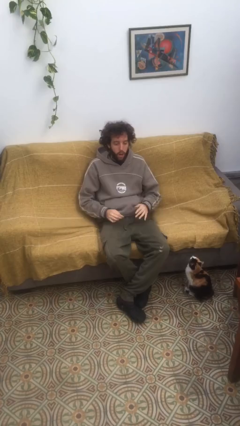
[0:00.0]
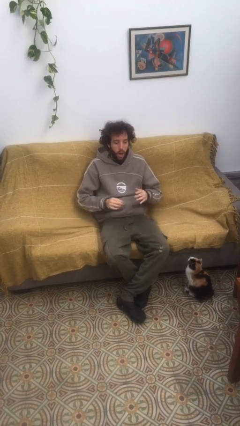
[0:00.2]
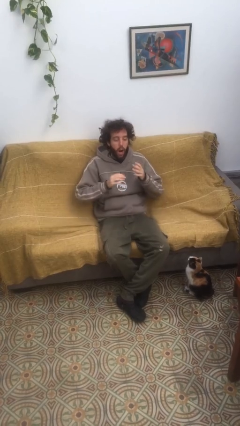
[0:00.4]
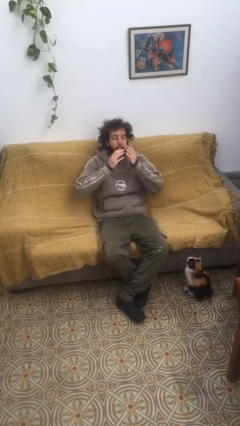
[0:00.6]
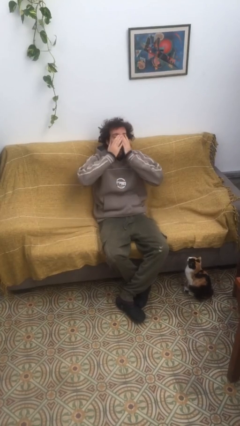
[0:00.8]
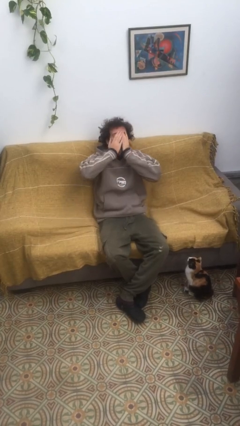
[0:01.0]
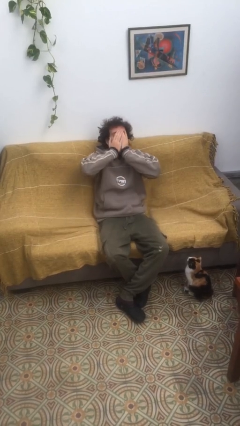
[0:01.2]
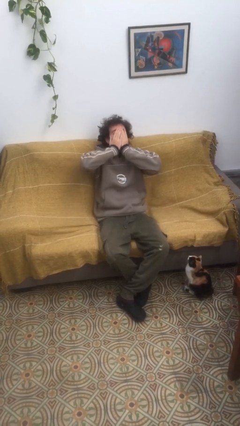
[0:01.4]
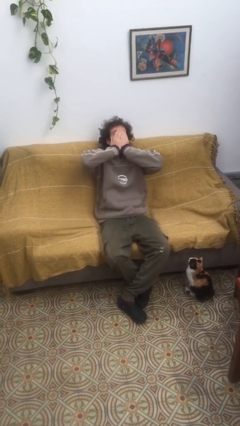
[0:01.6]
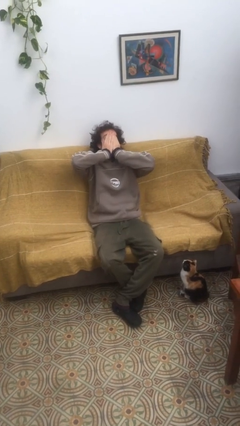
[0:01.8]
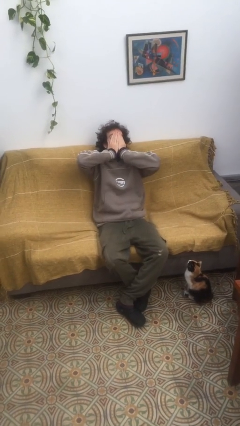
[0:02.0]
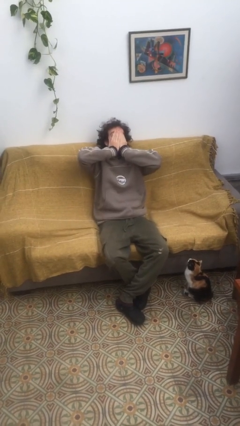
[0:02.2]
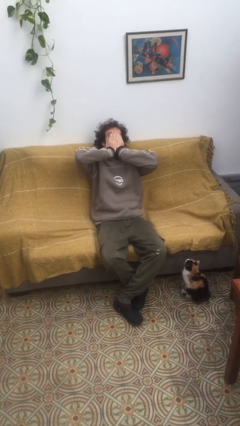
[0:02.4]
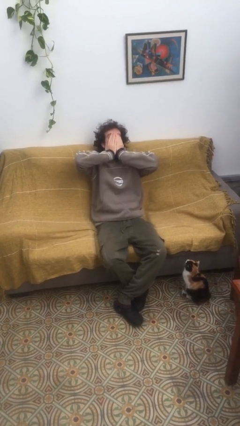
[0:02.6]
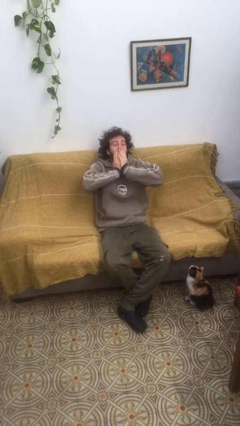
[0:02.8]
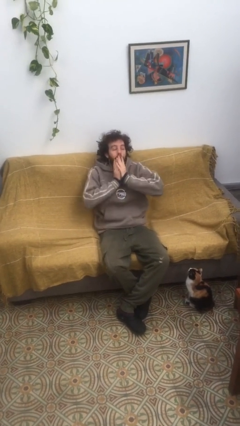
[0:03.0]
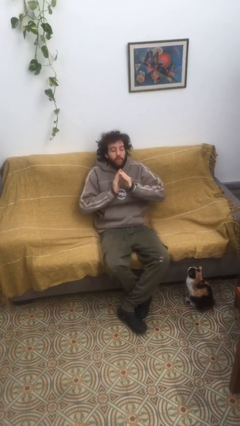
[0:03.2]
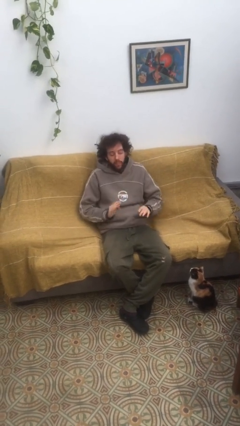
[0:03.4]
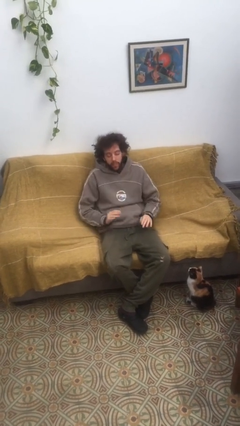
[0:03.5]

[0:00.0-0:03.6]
person yawns

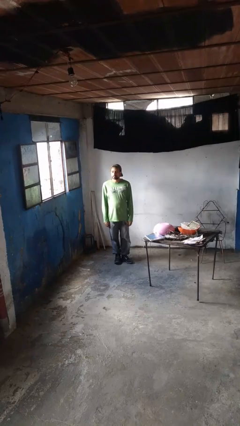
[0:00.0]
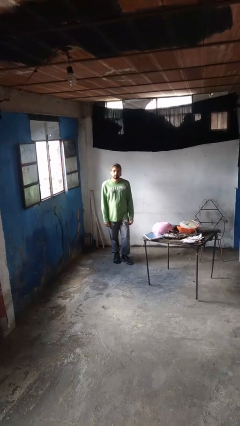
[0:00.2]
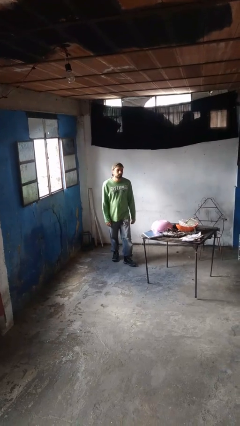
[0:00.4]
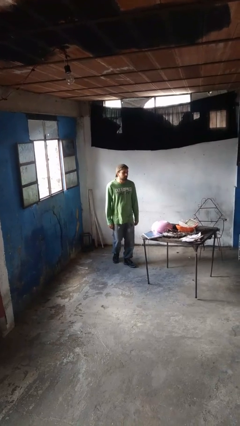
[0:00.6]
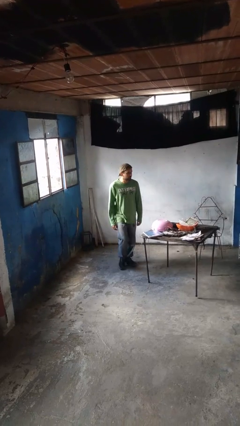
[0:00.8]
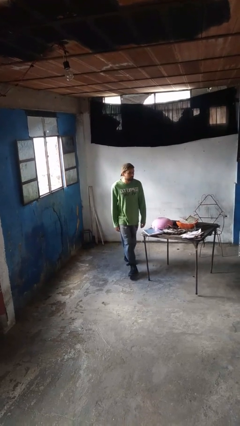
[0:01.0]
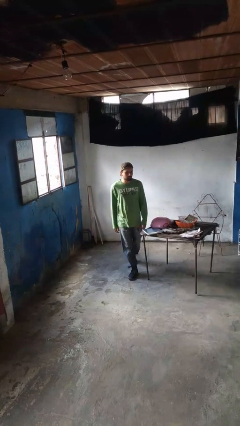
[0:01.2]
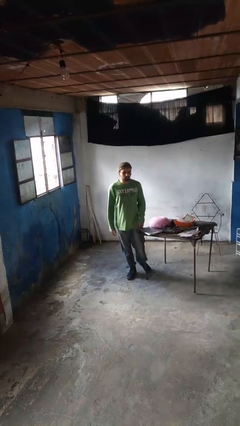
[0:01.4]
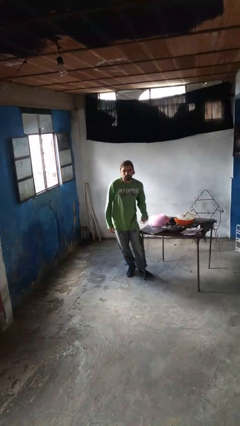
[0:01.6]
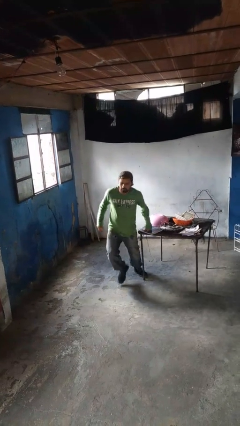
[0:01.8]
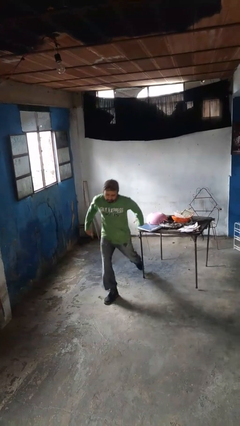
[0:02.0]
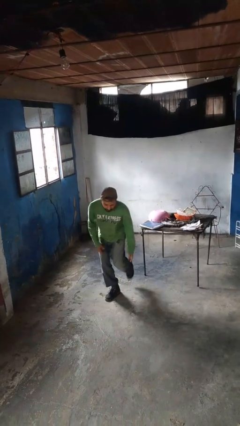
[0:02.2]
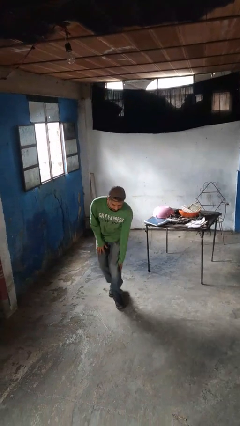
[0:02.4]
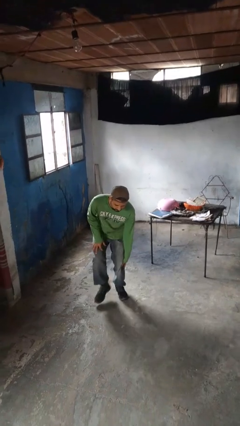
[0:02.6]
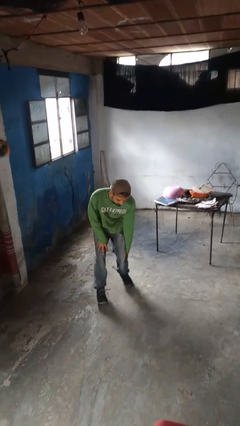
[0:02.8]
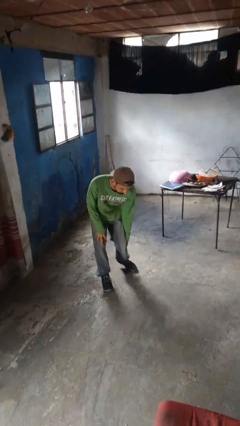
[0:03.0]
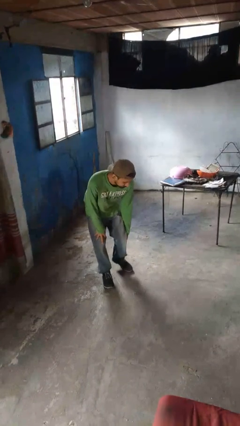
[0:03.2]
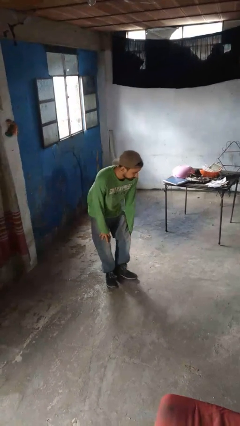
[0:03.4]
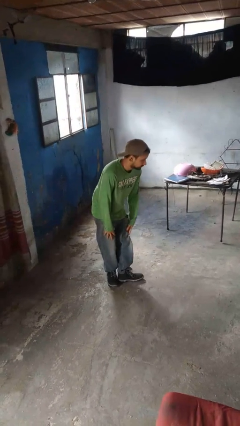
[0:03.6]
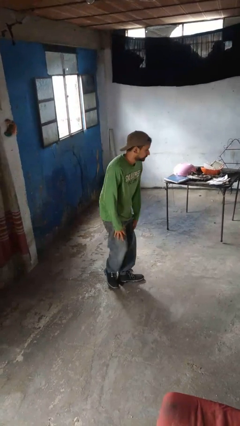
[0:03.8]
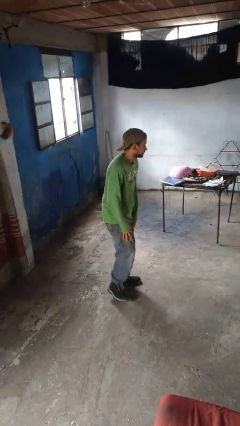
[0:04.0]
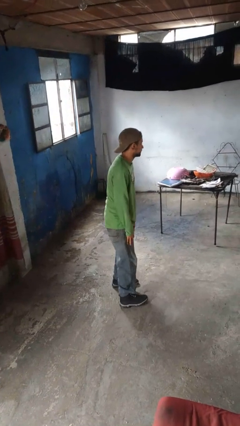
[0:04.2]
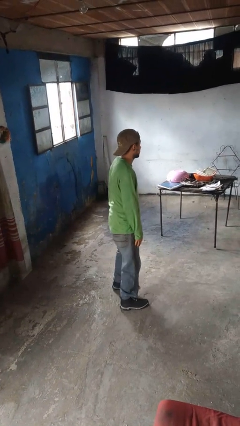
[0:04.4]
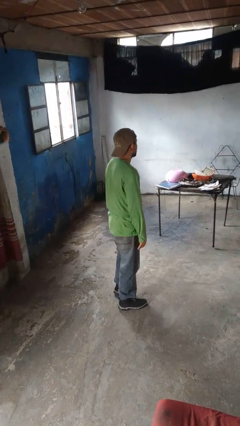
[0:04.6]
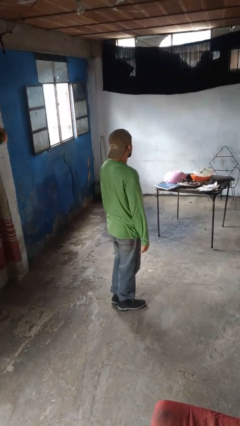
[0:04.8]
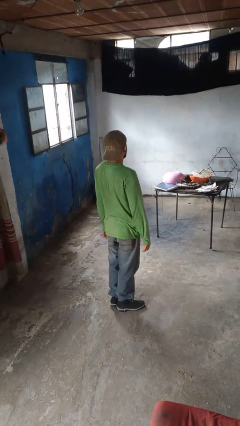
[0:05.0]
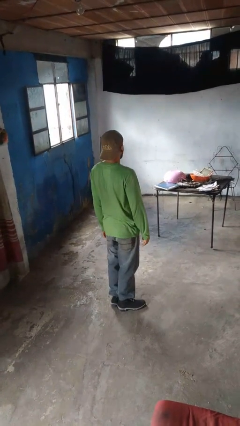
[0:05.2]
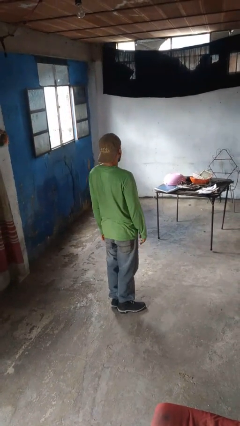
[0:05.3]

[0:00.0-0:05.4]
person bumps into table

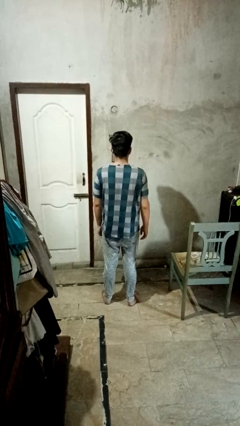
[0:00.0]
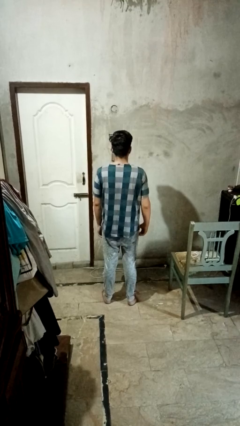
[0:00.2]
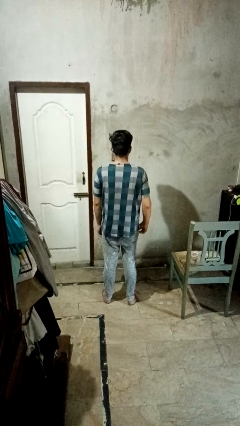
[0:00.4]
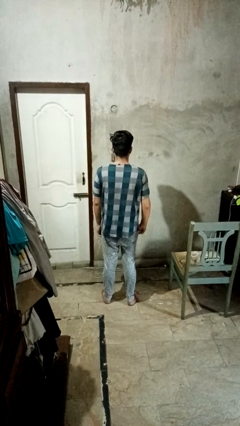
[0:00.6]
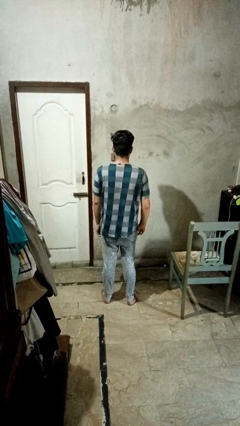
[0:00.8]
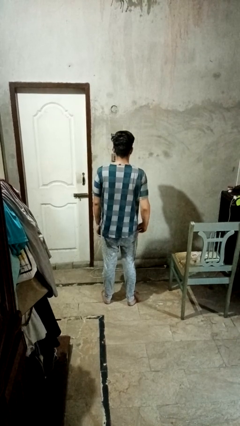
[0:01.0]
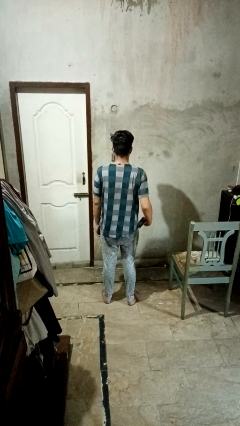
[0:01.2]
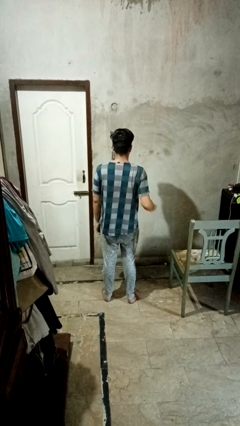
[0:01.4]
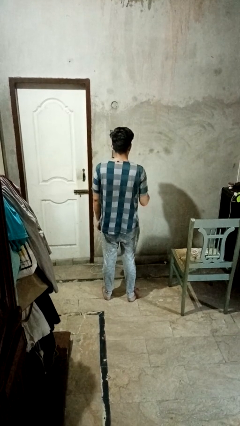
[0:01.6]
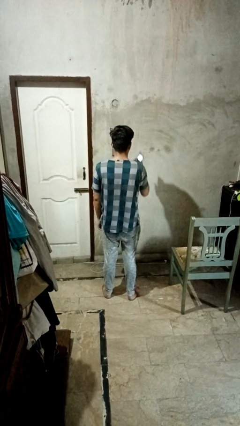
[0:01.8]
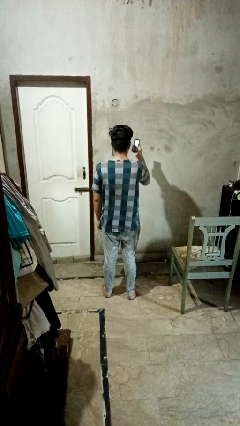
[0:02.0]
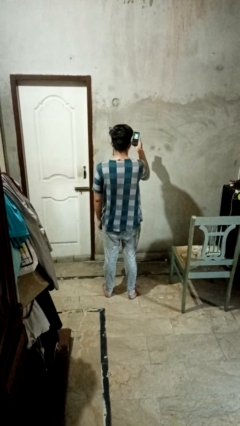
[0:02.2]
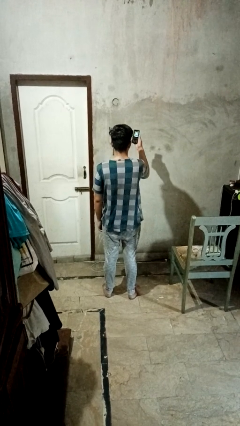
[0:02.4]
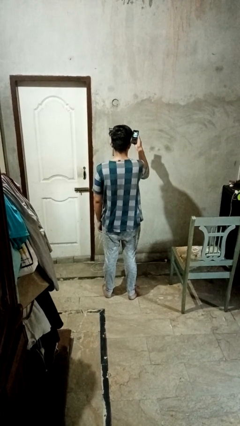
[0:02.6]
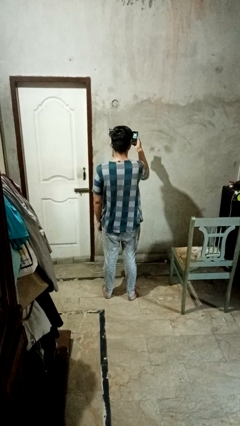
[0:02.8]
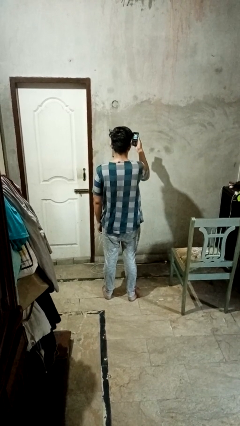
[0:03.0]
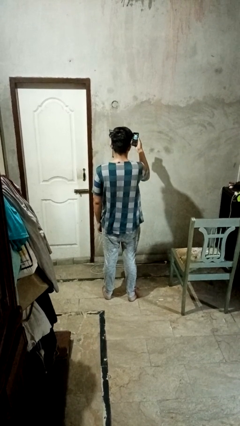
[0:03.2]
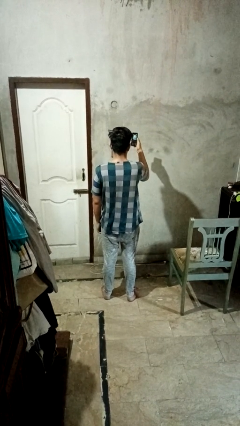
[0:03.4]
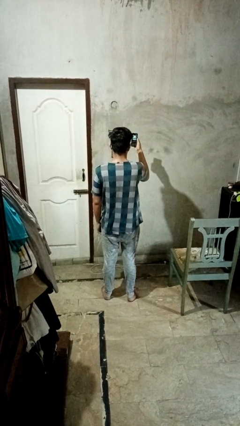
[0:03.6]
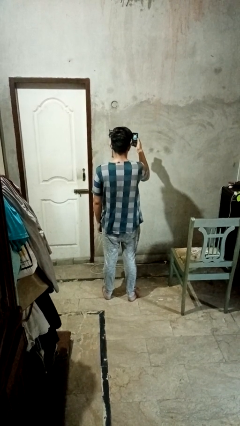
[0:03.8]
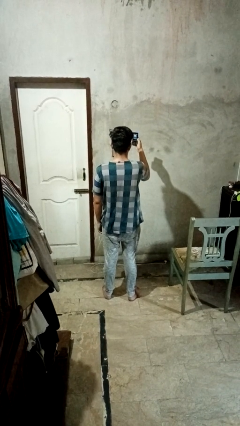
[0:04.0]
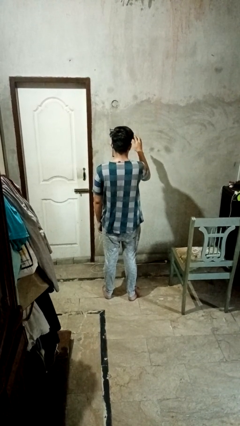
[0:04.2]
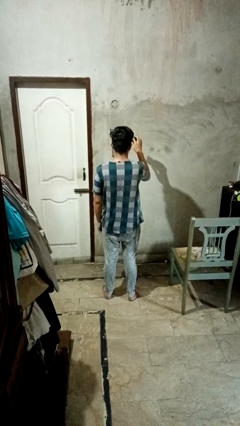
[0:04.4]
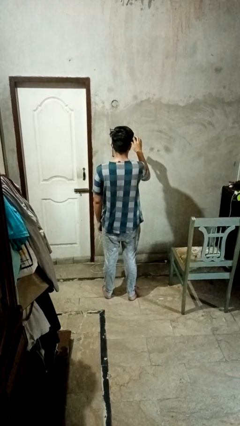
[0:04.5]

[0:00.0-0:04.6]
person takes phone from pocket

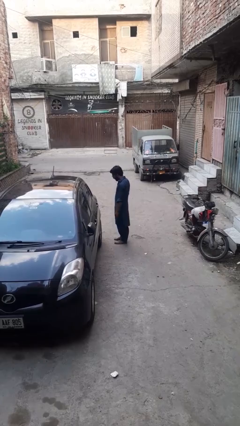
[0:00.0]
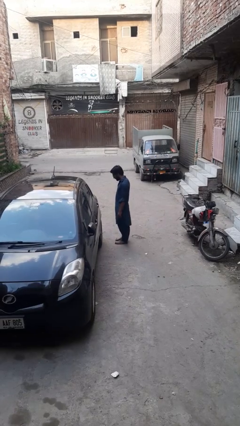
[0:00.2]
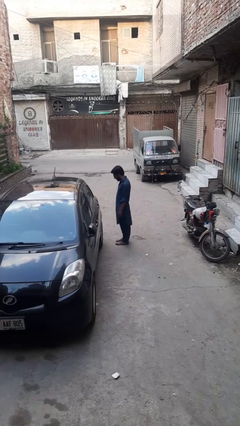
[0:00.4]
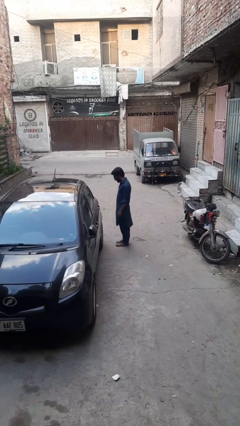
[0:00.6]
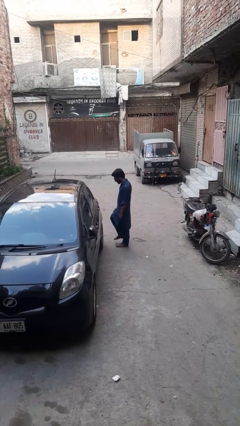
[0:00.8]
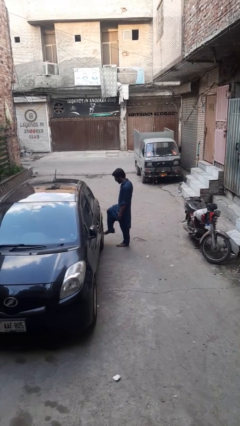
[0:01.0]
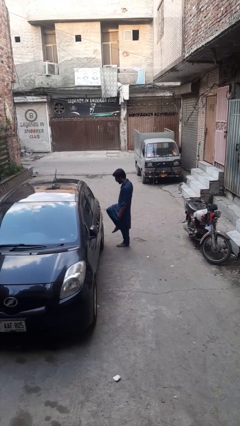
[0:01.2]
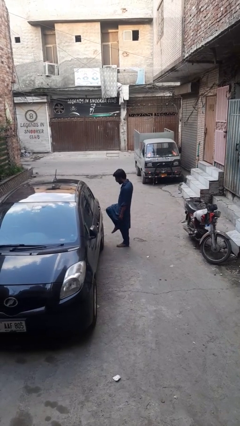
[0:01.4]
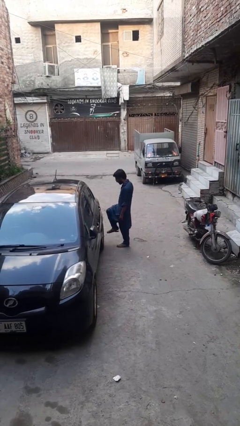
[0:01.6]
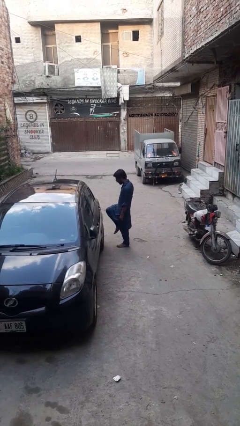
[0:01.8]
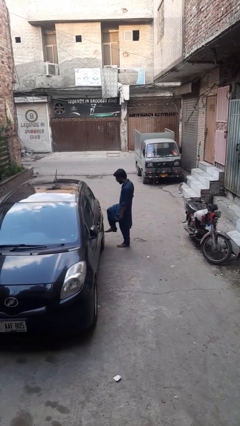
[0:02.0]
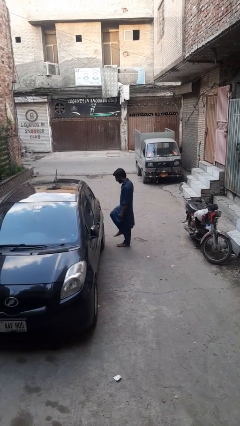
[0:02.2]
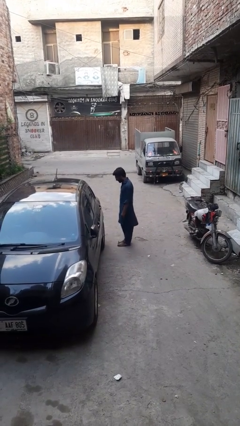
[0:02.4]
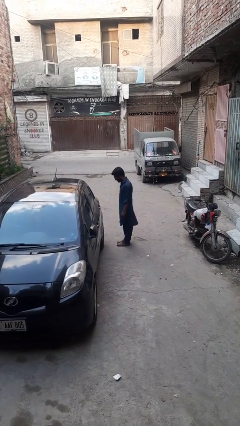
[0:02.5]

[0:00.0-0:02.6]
person kicks car tires

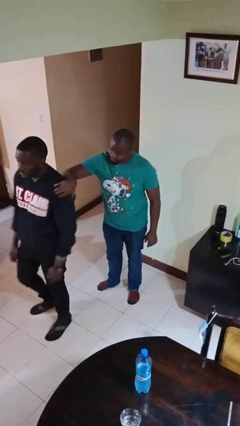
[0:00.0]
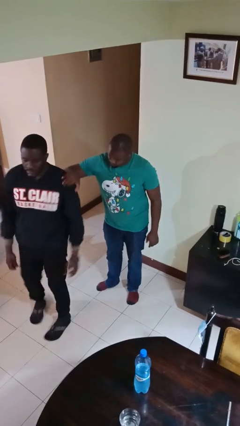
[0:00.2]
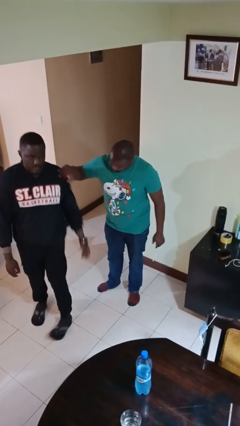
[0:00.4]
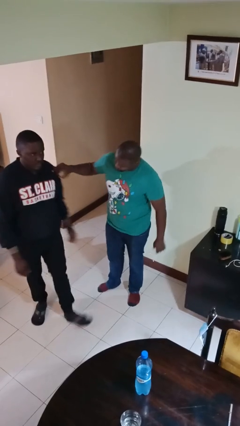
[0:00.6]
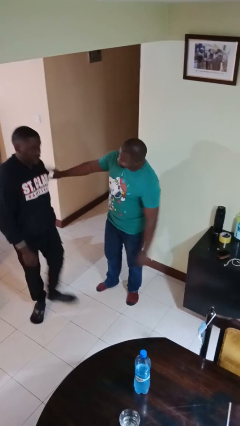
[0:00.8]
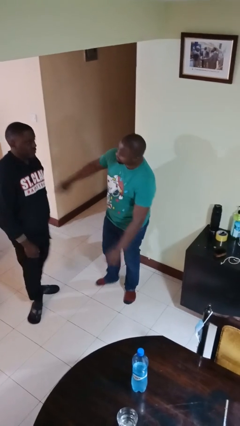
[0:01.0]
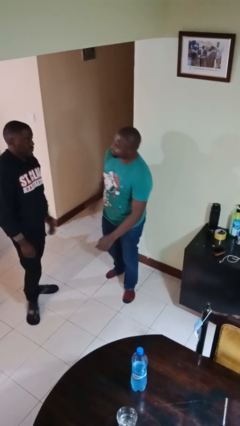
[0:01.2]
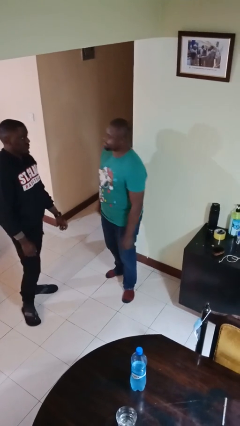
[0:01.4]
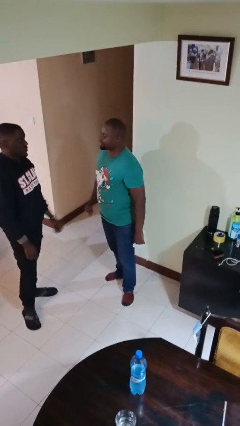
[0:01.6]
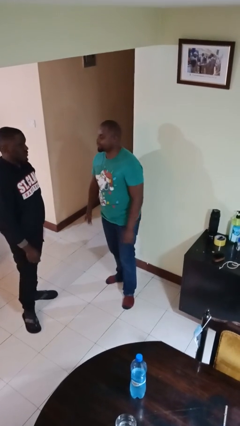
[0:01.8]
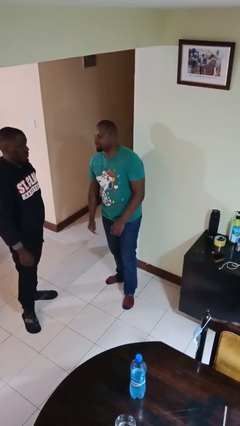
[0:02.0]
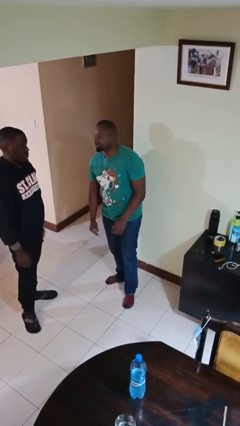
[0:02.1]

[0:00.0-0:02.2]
person spins person around
